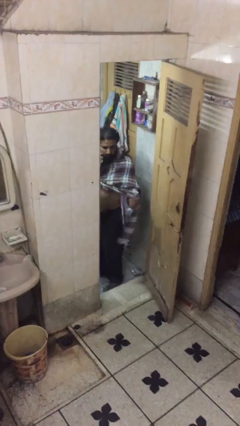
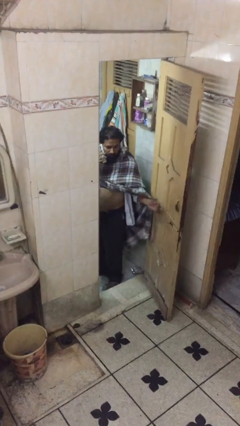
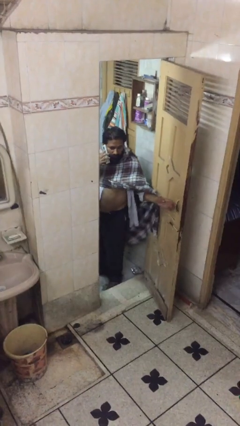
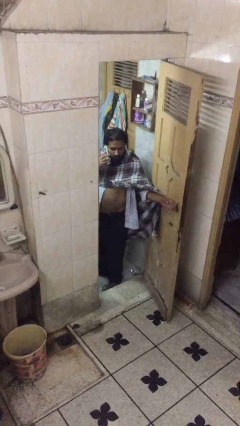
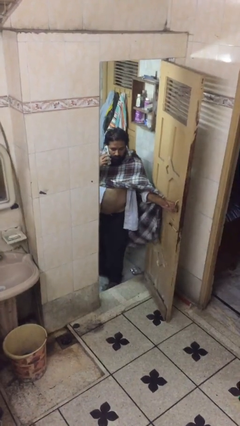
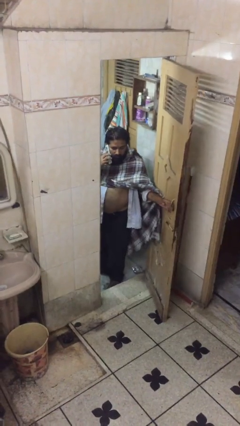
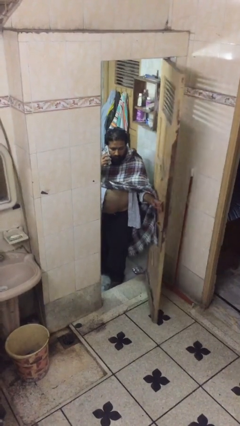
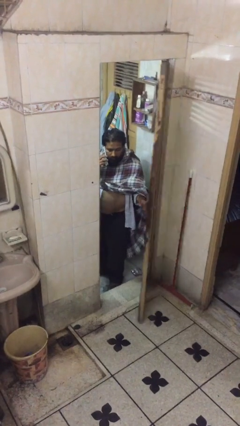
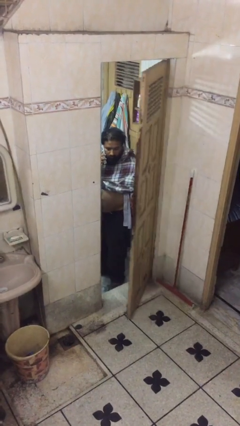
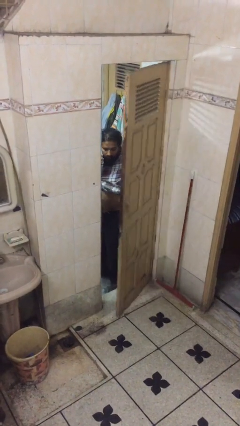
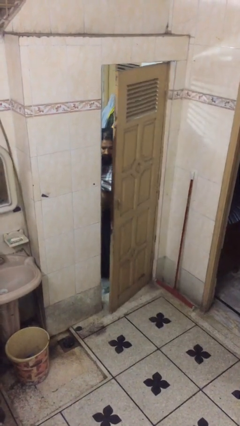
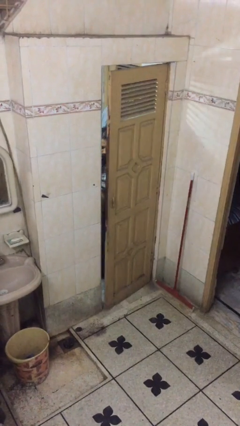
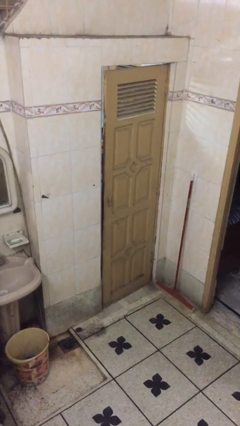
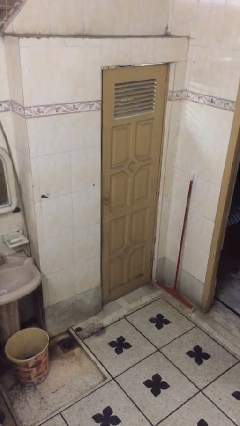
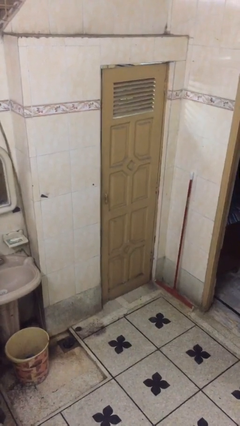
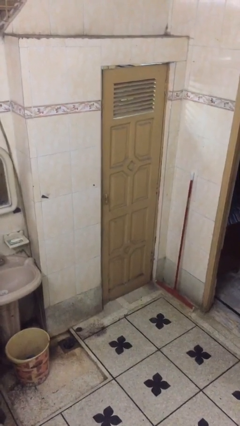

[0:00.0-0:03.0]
person closes facility door

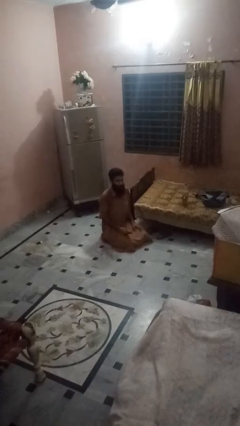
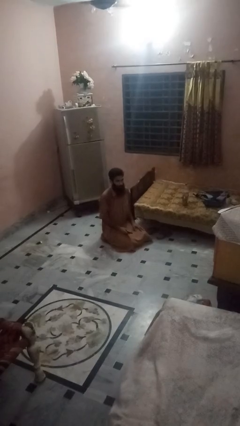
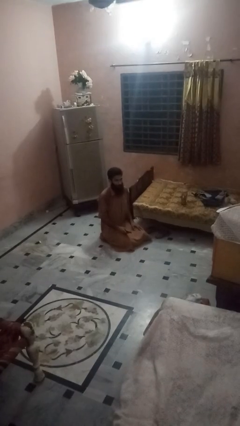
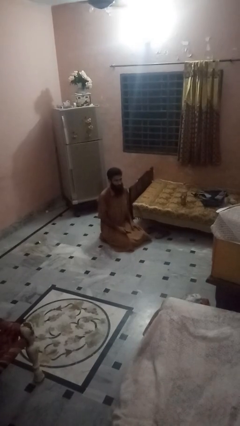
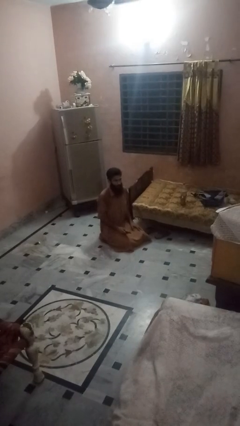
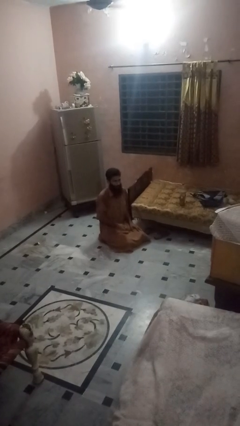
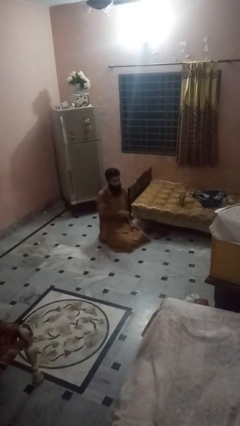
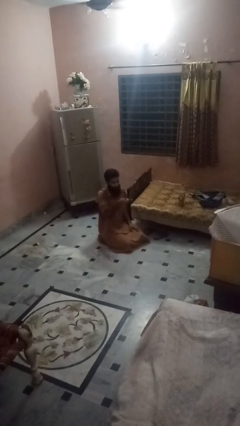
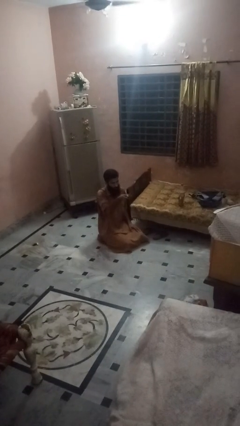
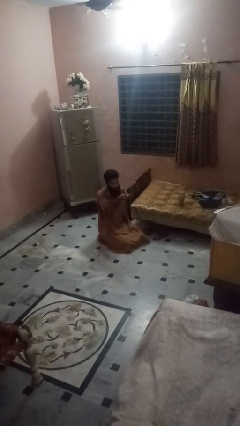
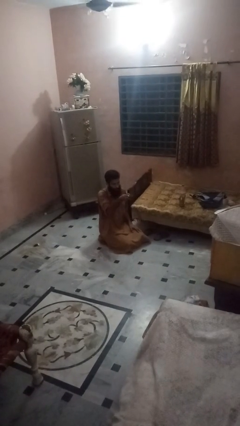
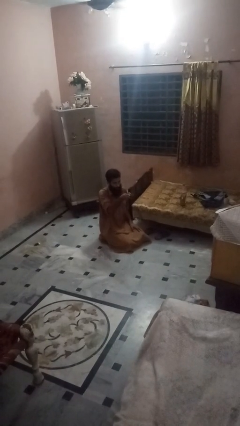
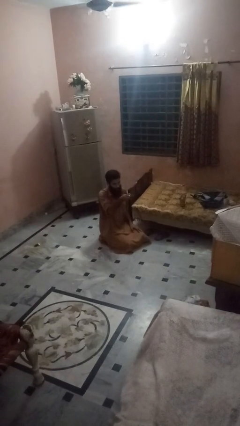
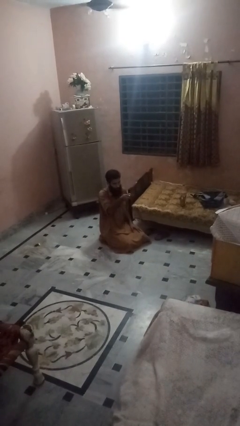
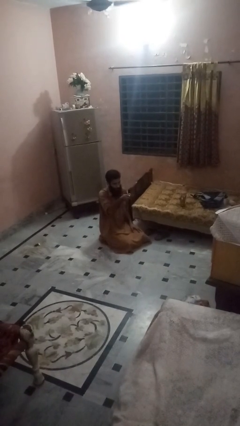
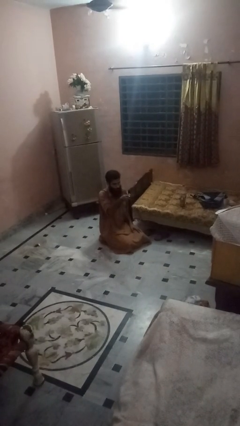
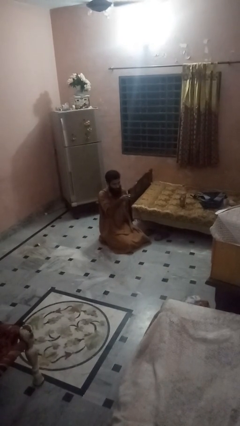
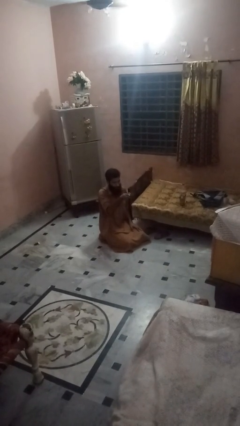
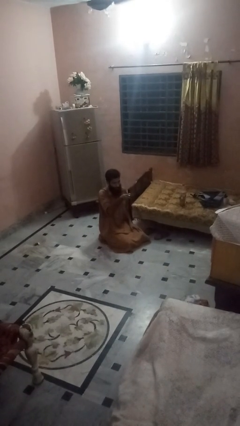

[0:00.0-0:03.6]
person uses television remote

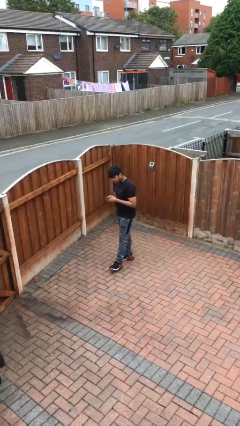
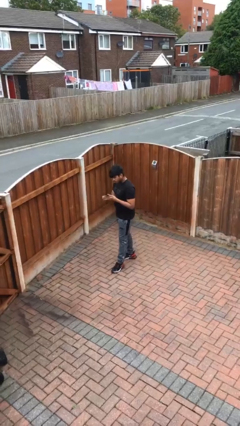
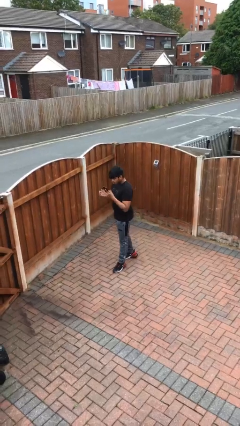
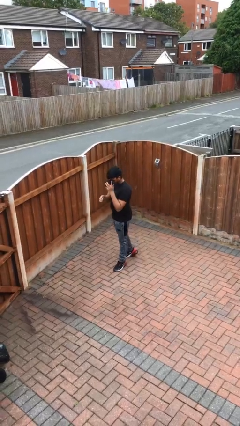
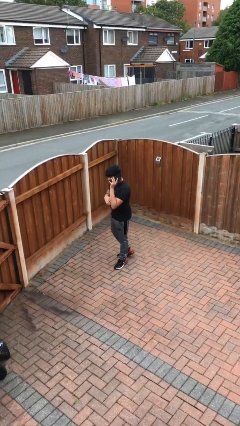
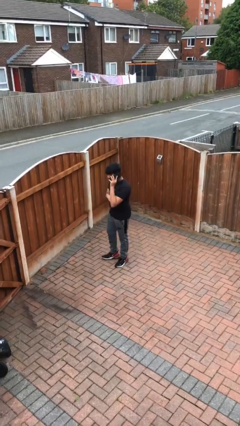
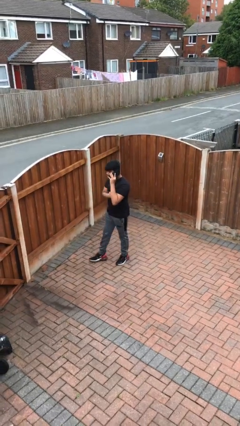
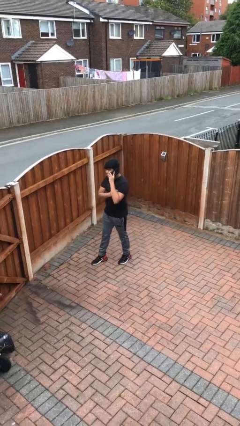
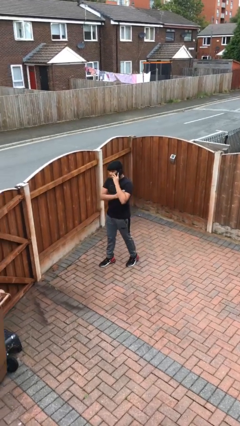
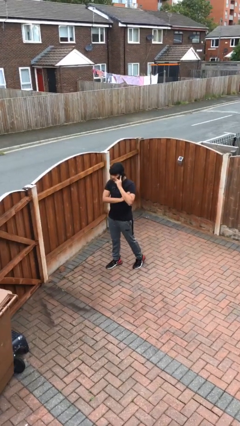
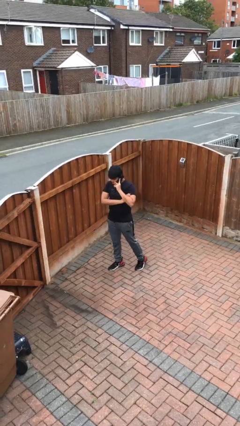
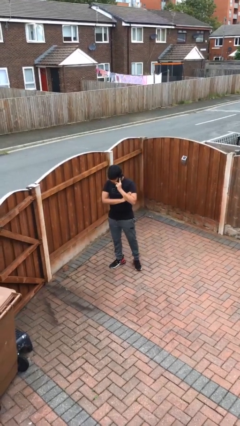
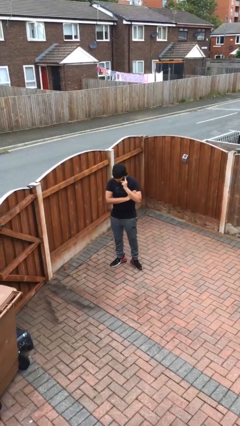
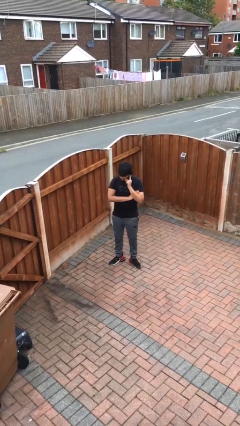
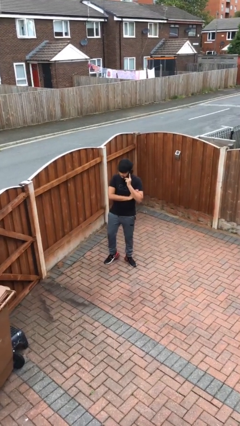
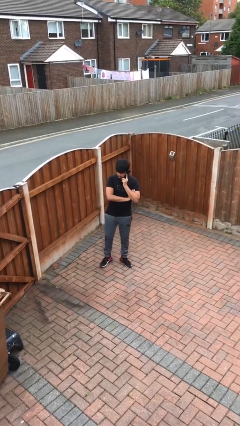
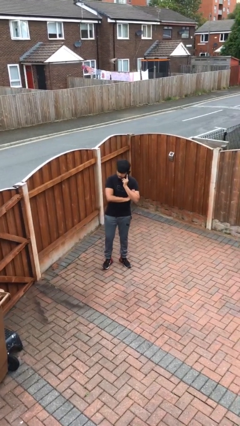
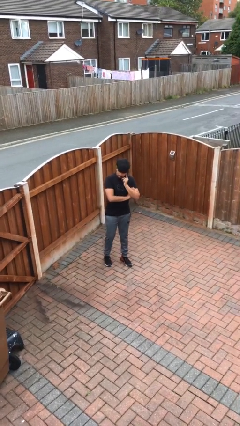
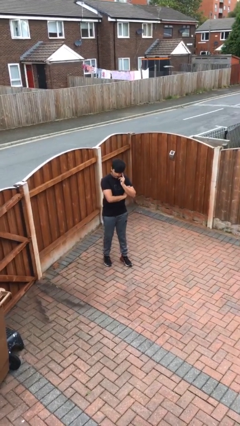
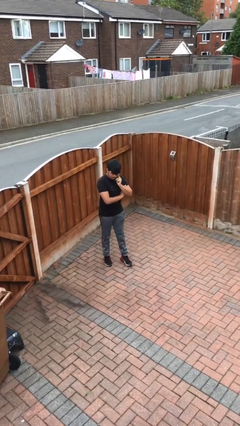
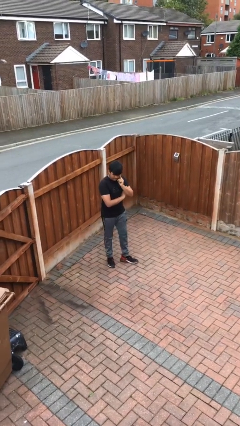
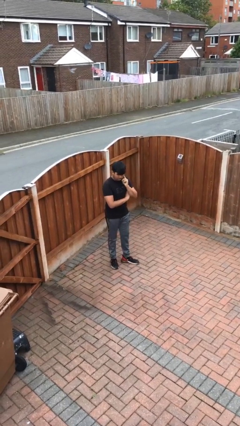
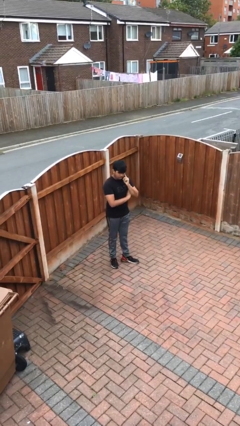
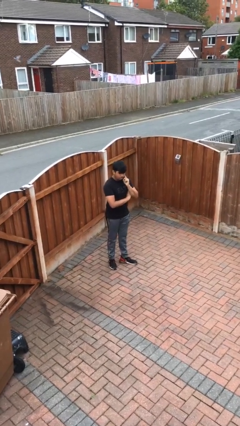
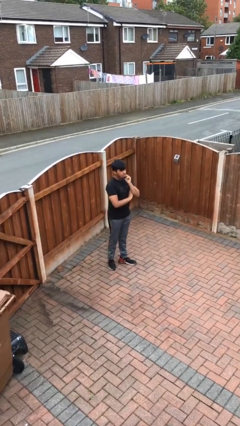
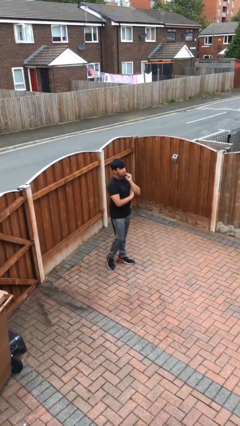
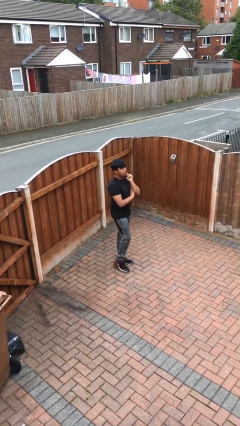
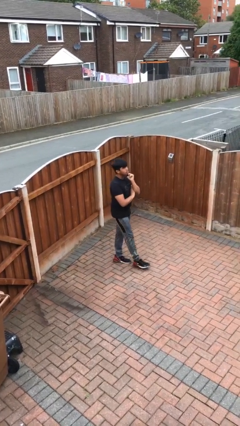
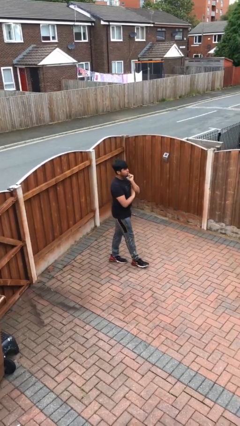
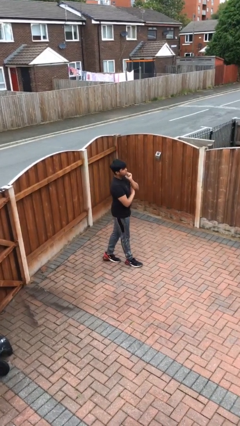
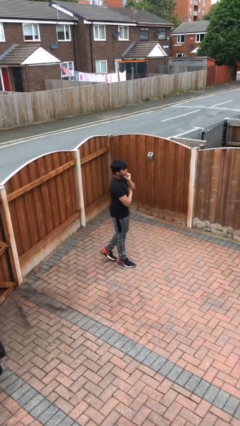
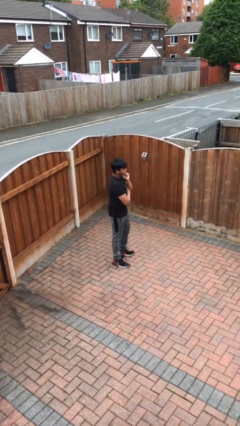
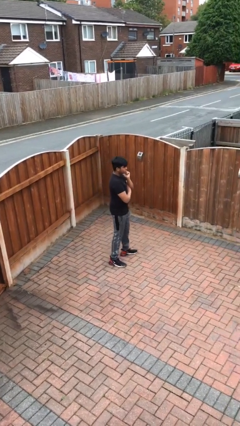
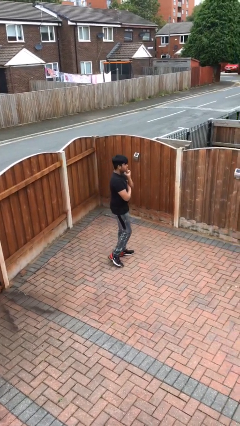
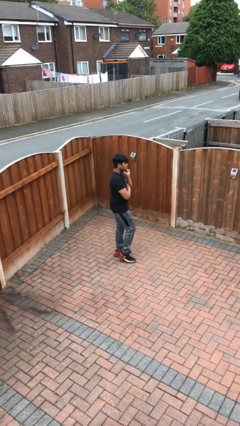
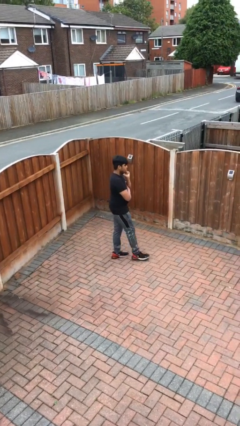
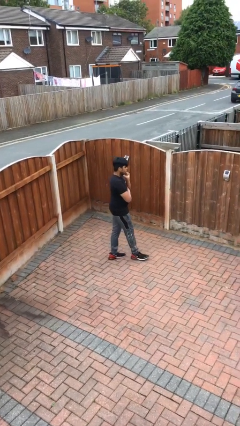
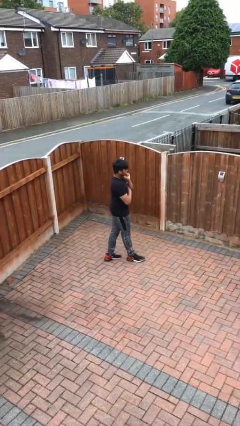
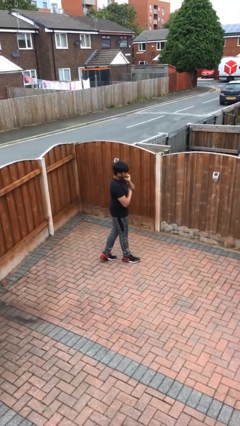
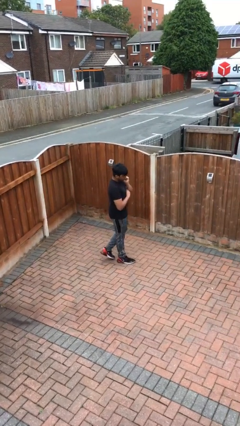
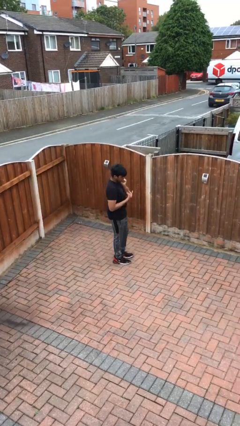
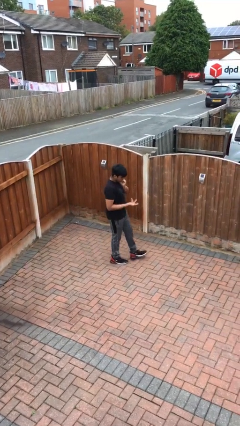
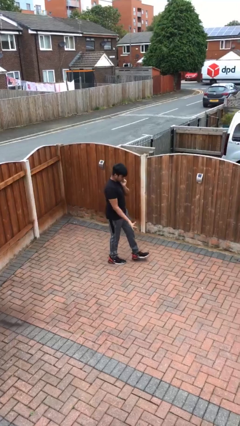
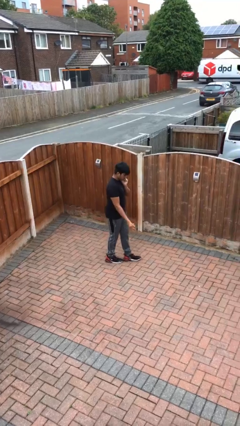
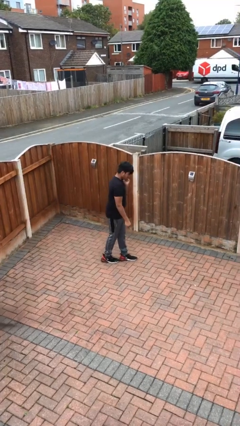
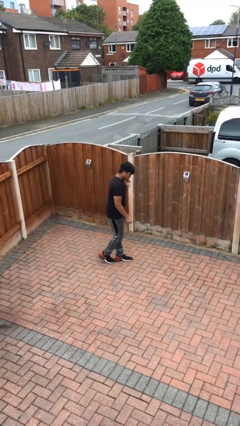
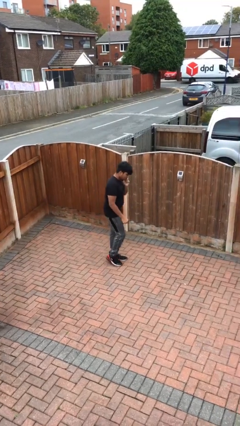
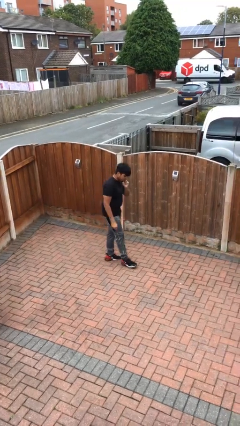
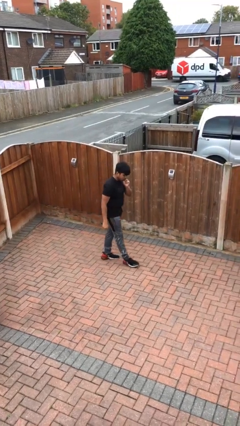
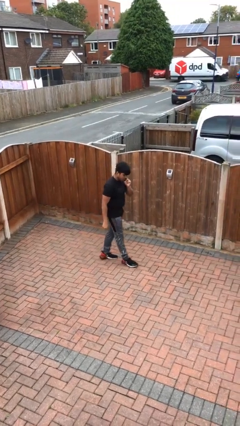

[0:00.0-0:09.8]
person talks on phone

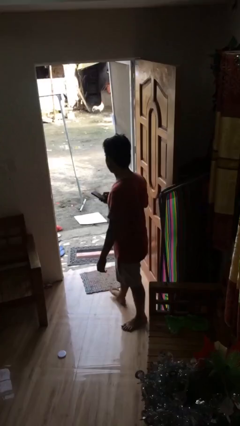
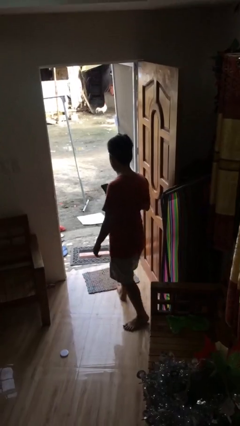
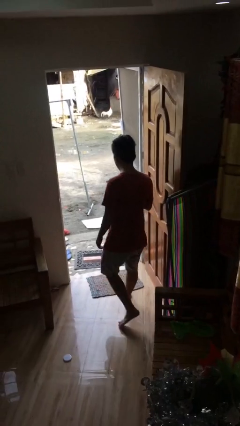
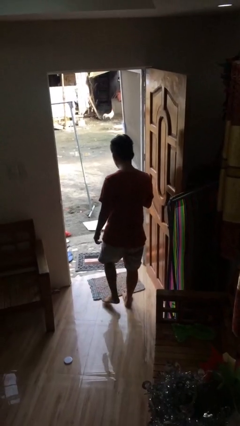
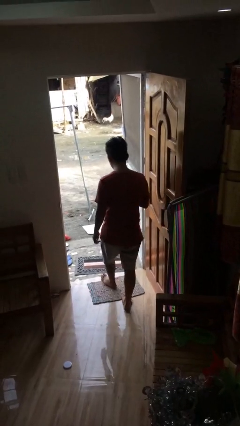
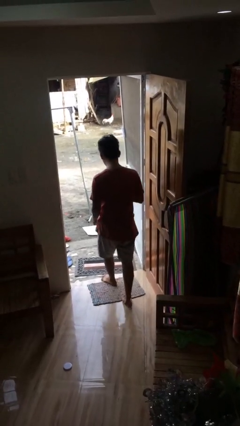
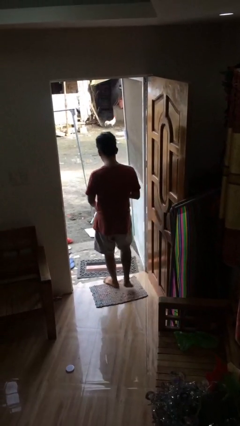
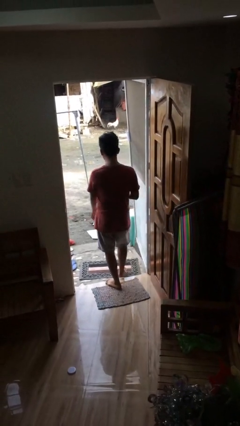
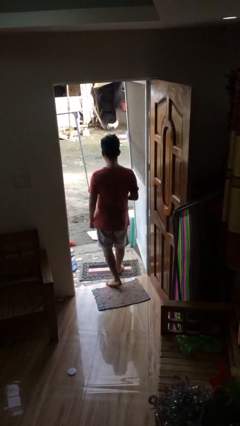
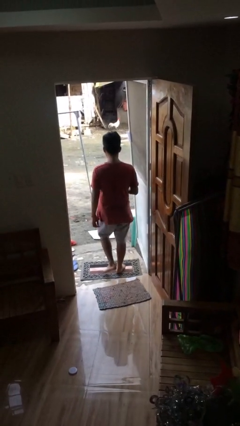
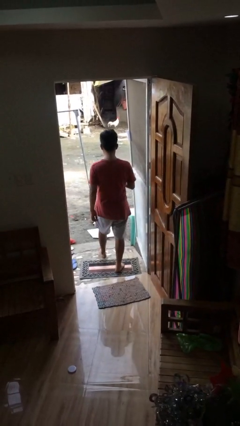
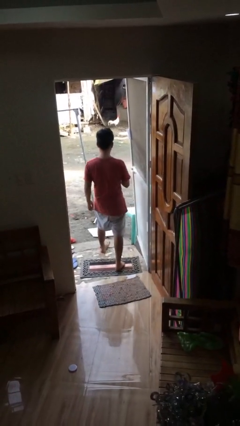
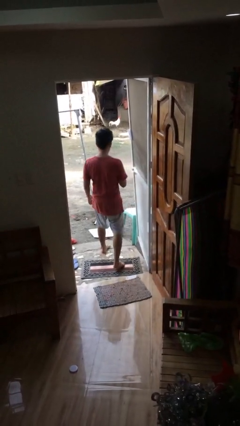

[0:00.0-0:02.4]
person exits scene through structure
